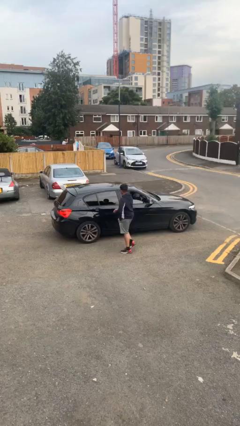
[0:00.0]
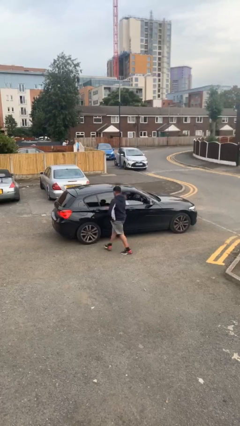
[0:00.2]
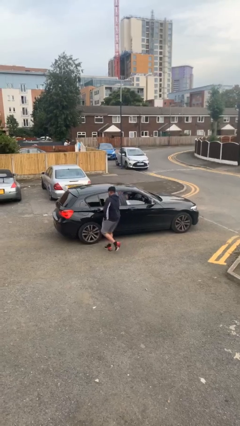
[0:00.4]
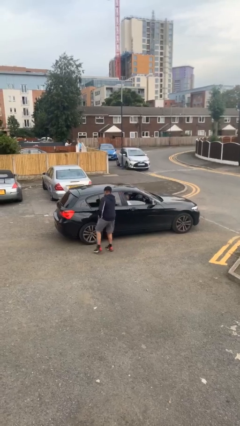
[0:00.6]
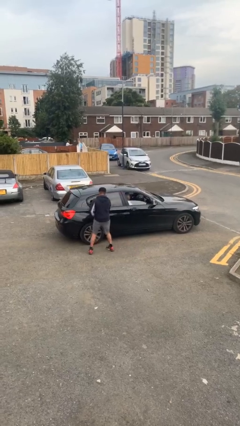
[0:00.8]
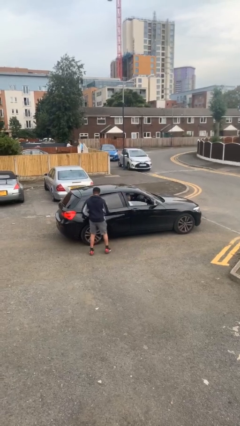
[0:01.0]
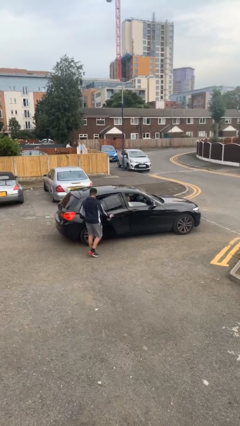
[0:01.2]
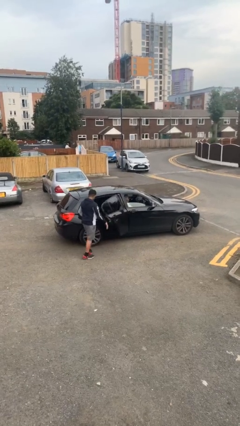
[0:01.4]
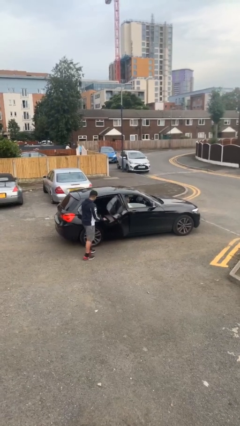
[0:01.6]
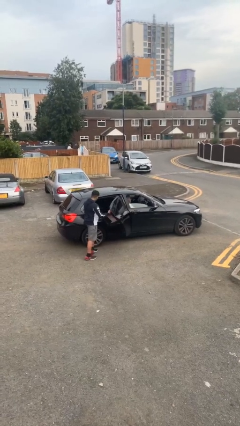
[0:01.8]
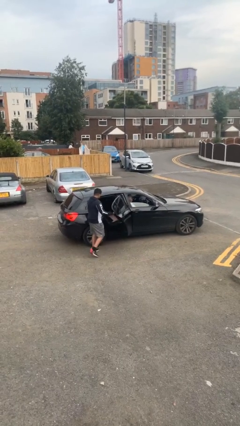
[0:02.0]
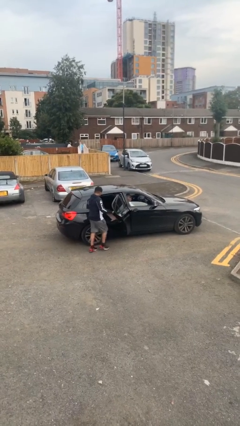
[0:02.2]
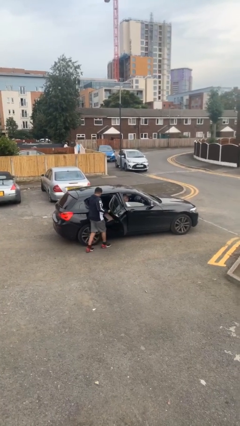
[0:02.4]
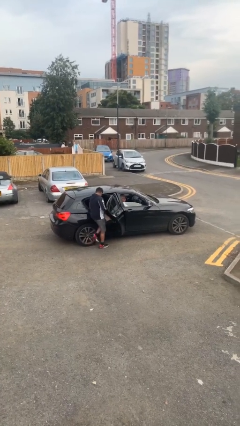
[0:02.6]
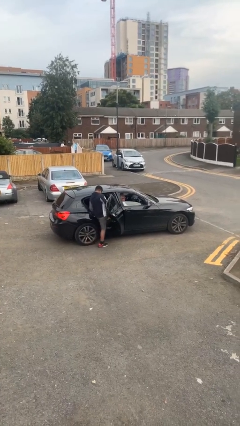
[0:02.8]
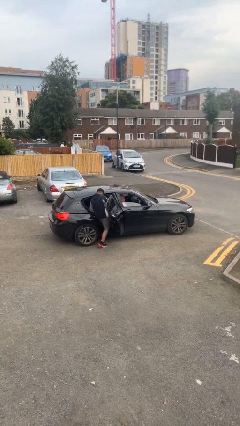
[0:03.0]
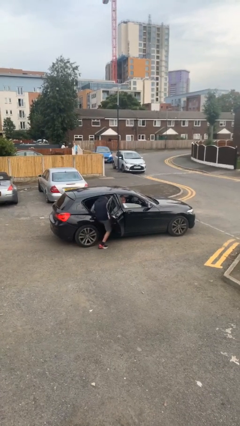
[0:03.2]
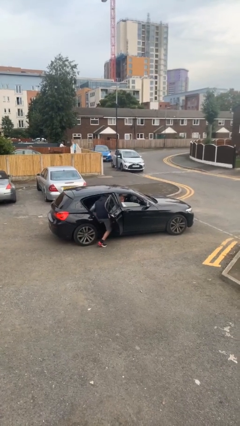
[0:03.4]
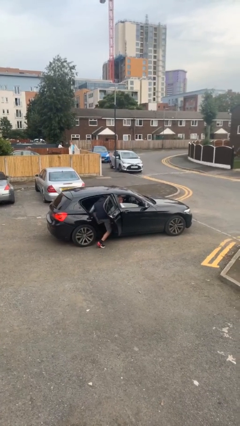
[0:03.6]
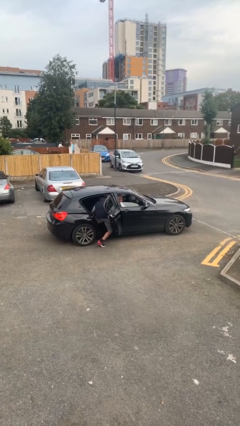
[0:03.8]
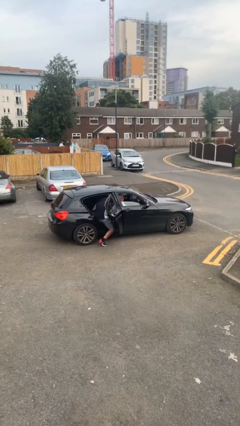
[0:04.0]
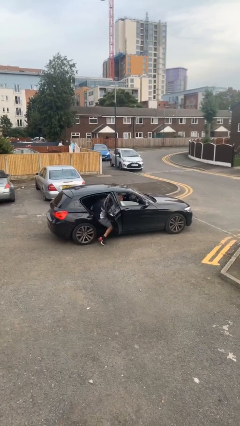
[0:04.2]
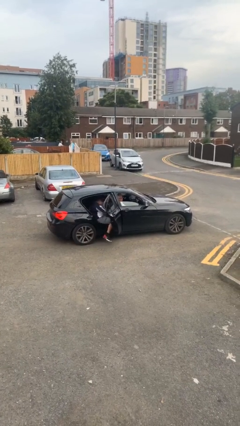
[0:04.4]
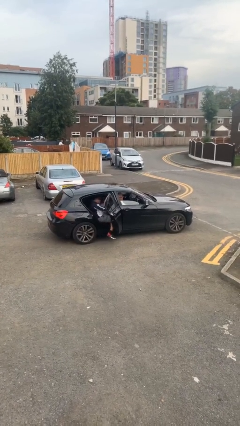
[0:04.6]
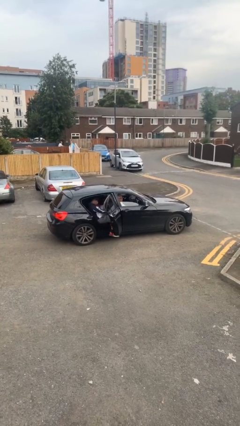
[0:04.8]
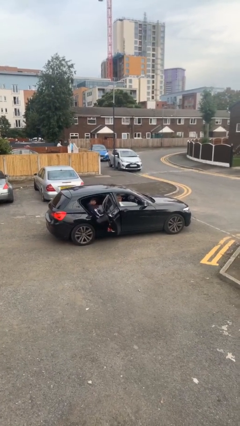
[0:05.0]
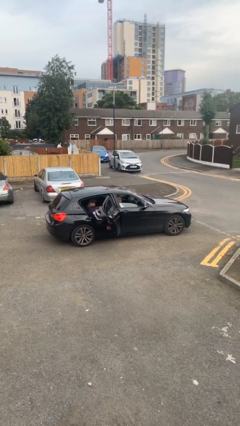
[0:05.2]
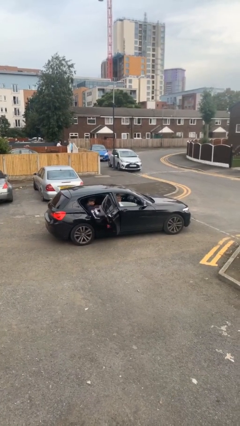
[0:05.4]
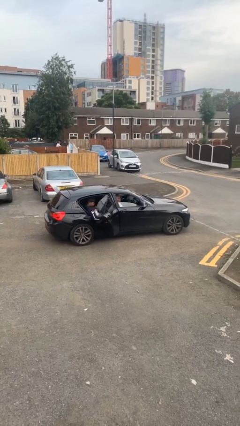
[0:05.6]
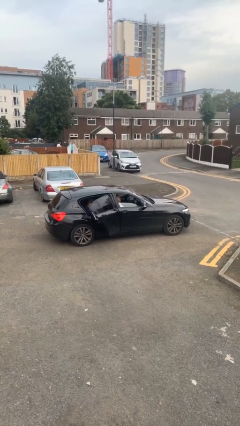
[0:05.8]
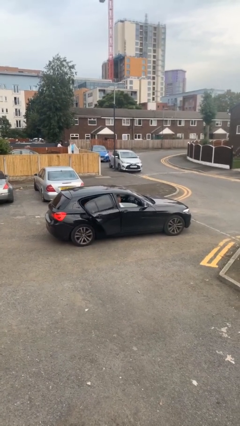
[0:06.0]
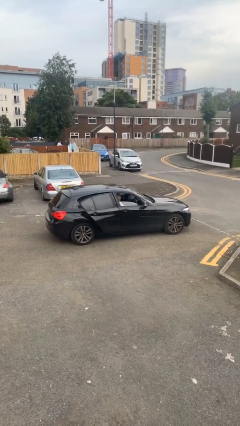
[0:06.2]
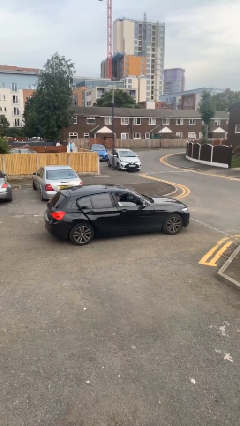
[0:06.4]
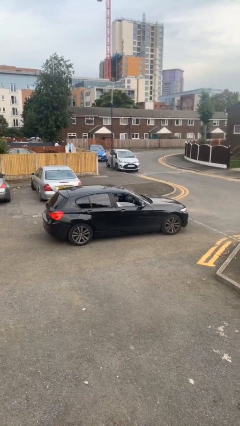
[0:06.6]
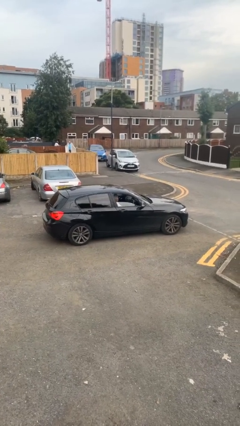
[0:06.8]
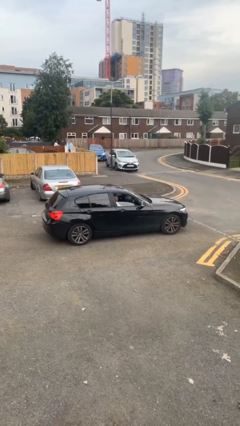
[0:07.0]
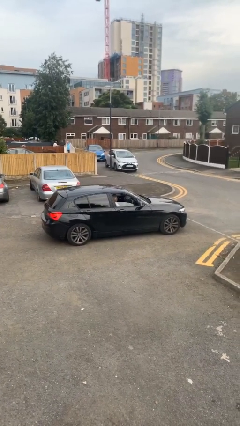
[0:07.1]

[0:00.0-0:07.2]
car picks up person

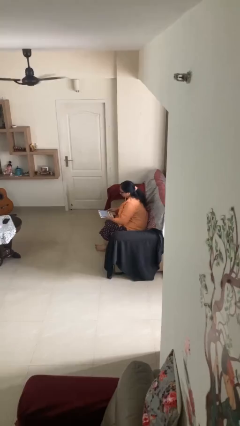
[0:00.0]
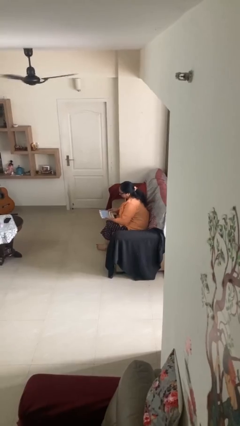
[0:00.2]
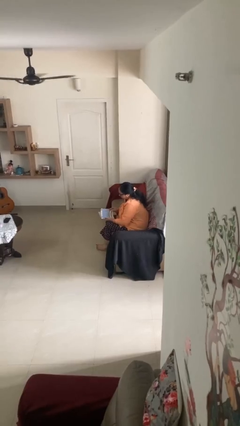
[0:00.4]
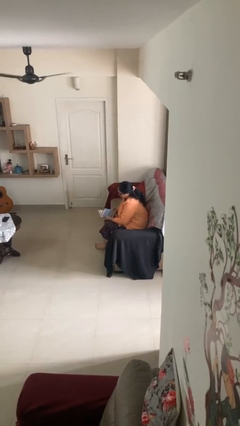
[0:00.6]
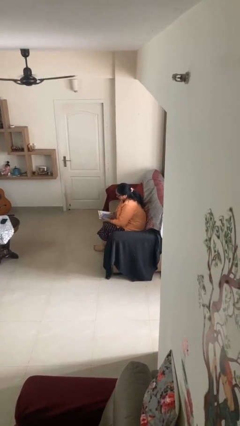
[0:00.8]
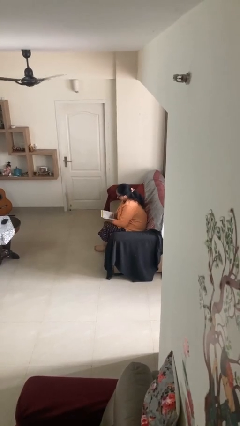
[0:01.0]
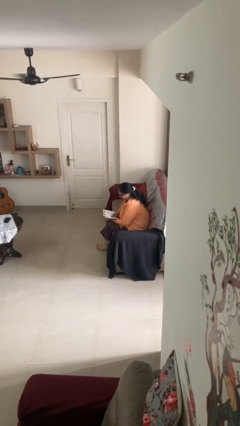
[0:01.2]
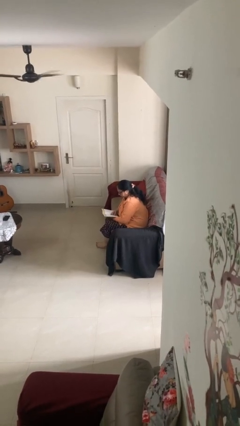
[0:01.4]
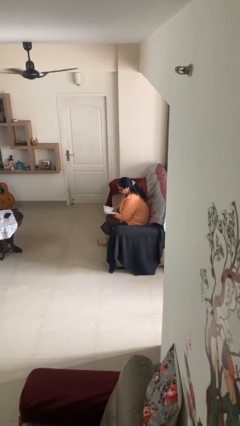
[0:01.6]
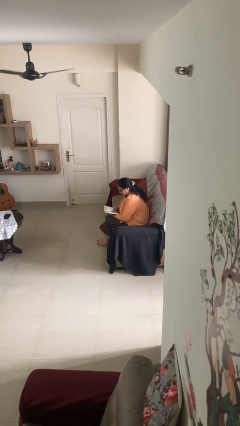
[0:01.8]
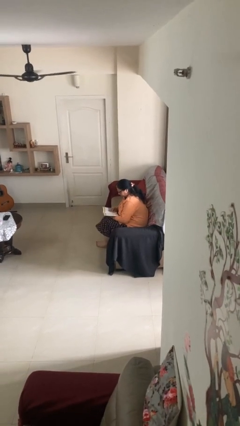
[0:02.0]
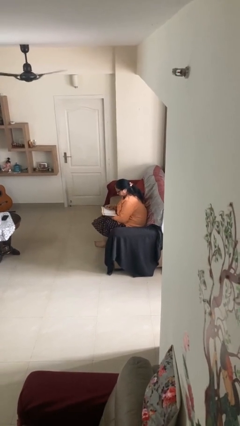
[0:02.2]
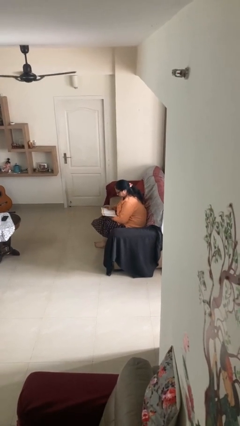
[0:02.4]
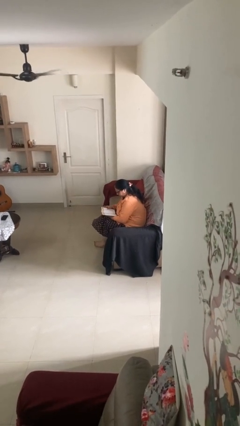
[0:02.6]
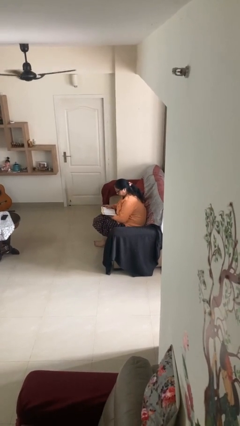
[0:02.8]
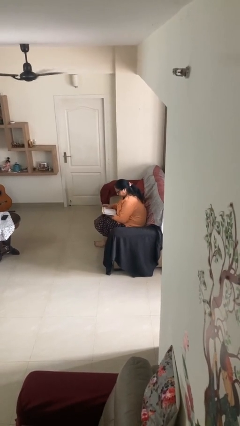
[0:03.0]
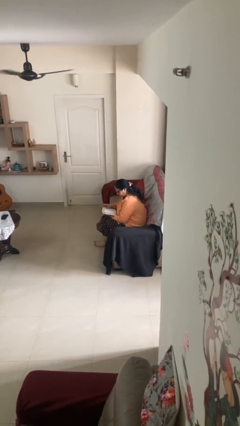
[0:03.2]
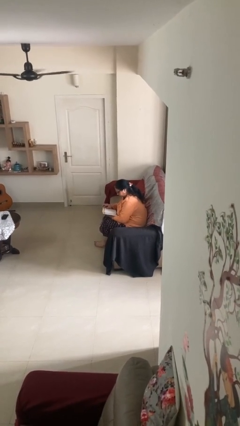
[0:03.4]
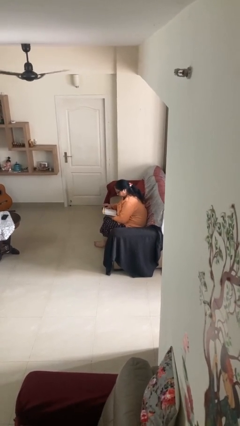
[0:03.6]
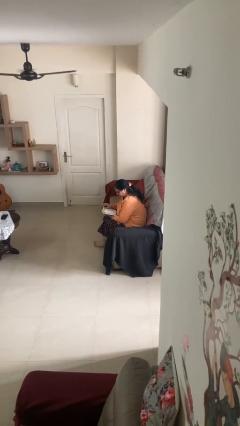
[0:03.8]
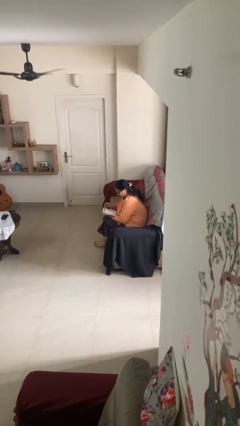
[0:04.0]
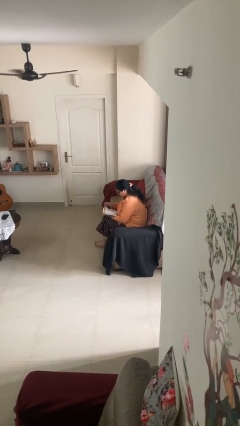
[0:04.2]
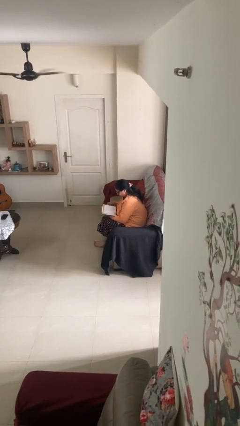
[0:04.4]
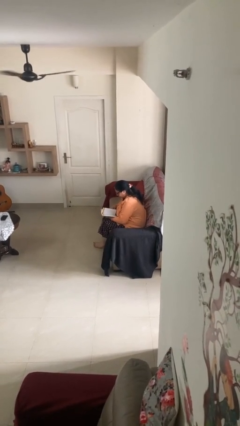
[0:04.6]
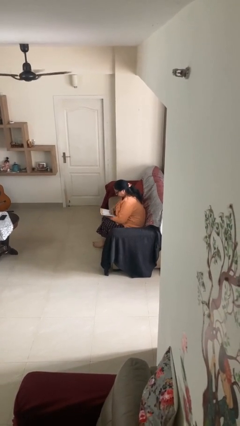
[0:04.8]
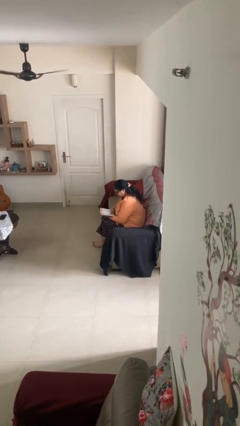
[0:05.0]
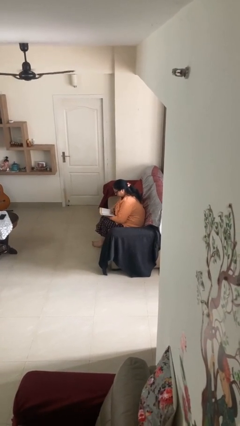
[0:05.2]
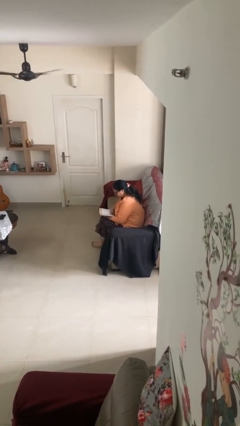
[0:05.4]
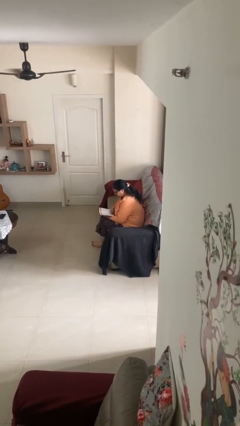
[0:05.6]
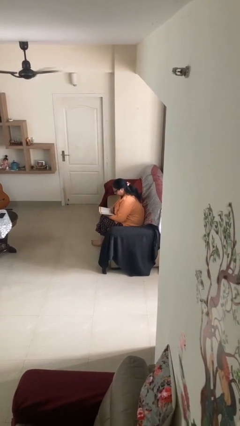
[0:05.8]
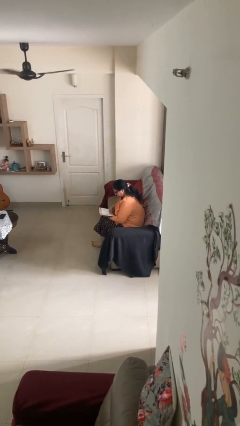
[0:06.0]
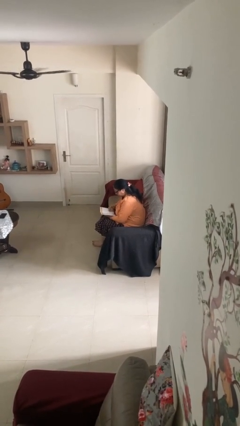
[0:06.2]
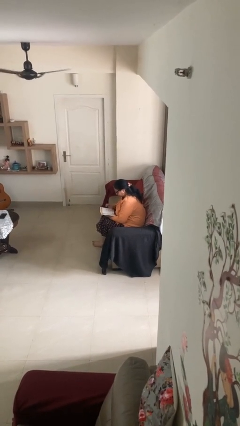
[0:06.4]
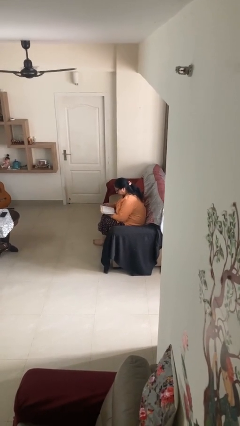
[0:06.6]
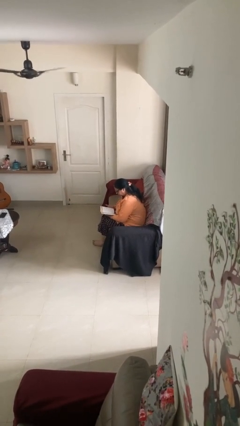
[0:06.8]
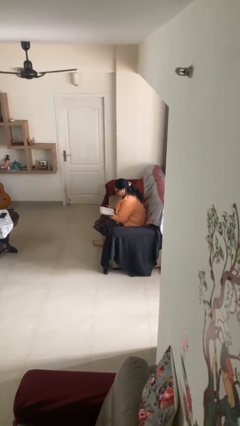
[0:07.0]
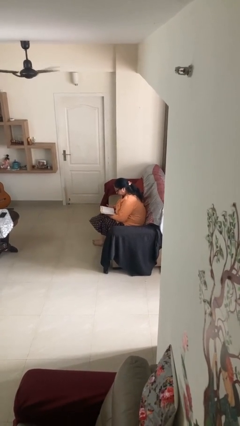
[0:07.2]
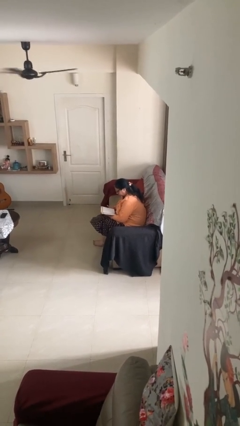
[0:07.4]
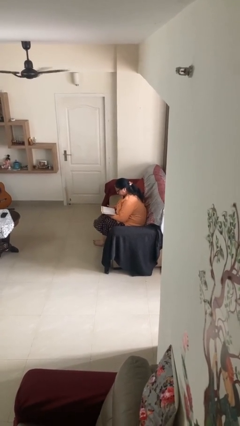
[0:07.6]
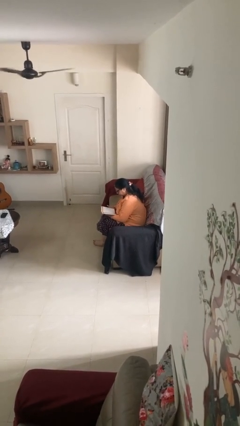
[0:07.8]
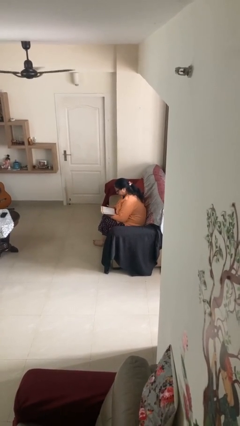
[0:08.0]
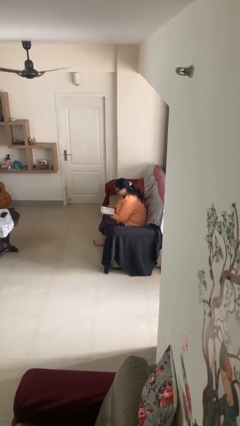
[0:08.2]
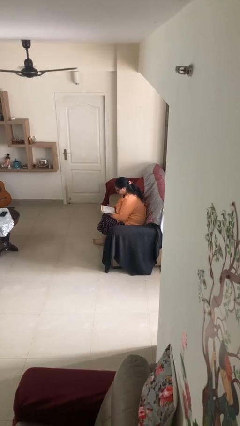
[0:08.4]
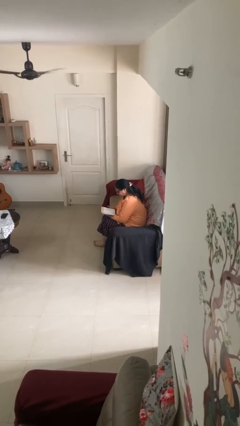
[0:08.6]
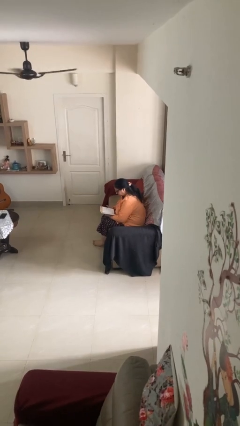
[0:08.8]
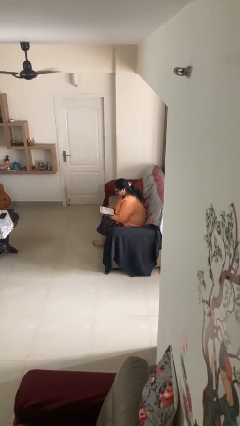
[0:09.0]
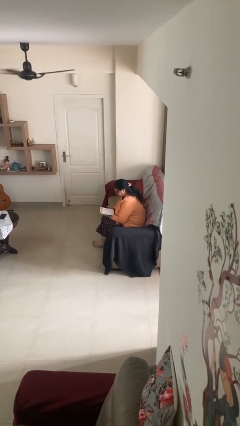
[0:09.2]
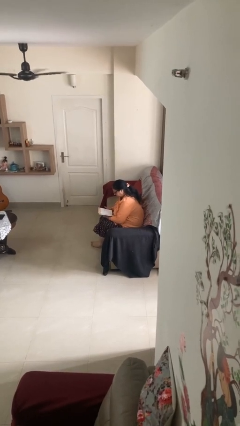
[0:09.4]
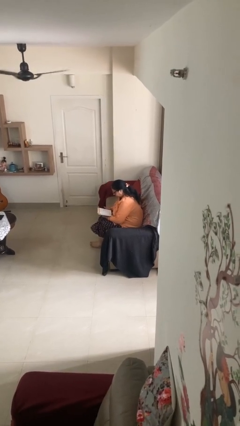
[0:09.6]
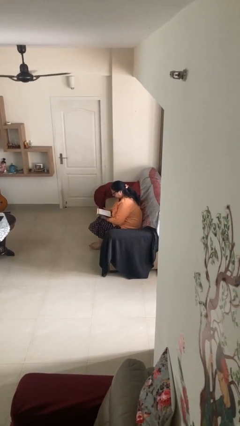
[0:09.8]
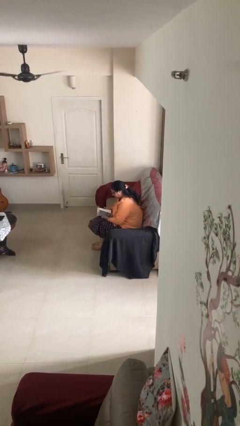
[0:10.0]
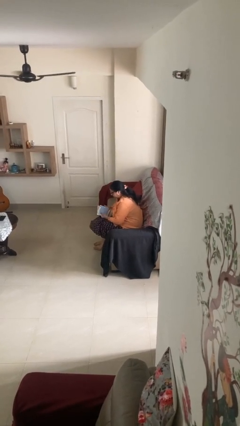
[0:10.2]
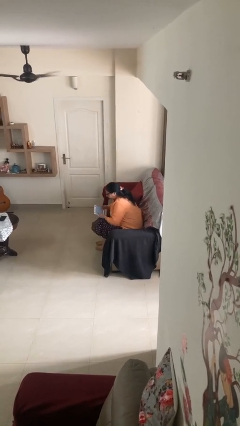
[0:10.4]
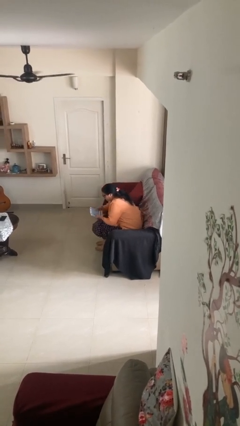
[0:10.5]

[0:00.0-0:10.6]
person reads document
